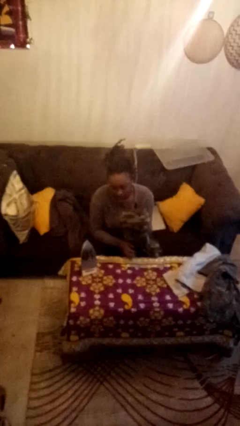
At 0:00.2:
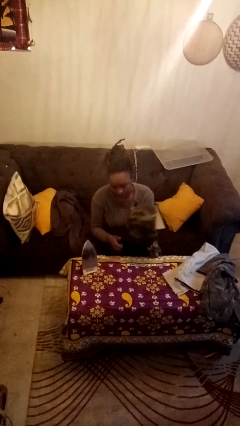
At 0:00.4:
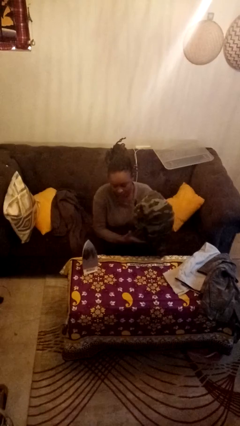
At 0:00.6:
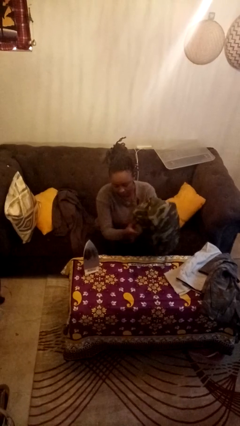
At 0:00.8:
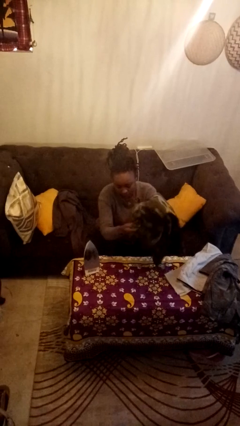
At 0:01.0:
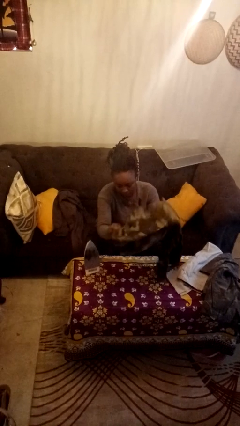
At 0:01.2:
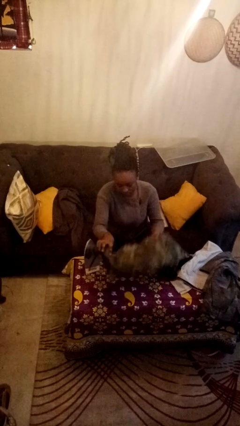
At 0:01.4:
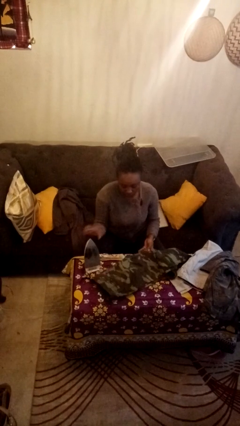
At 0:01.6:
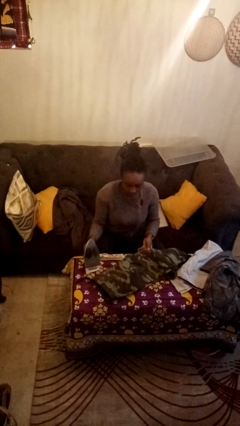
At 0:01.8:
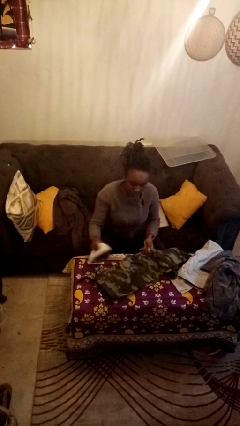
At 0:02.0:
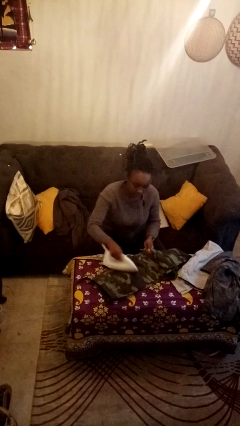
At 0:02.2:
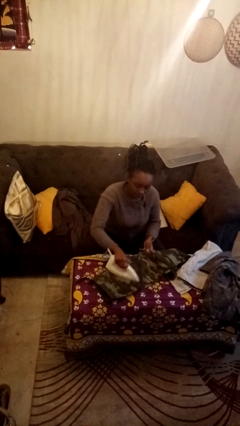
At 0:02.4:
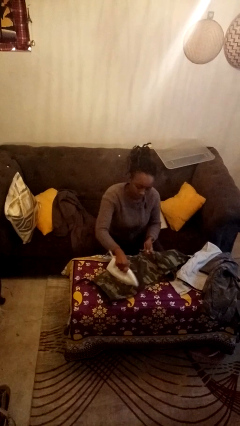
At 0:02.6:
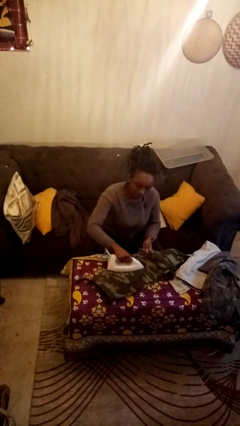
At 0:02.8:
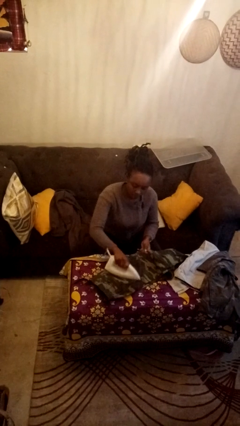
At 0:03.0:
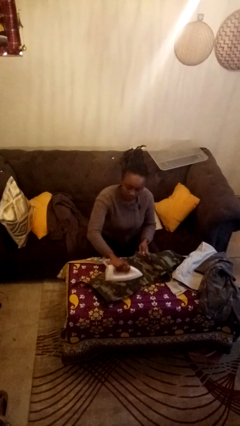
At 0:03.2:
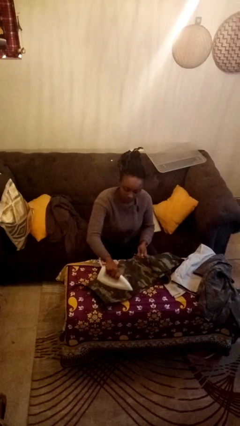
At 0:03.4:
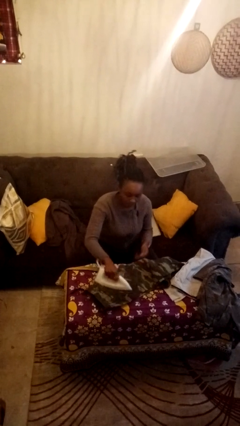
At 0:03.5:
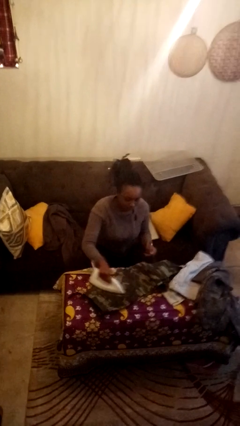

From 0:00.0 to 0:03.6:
person irons clothes

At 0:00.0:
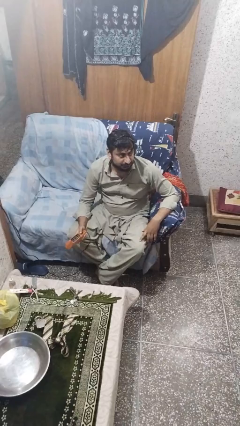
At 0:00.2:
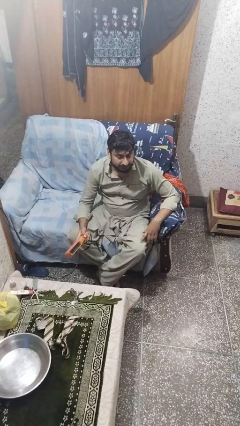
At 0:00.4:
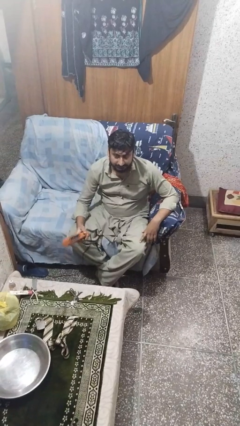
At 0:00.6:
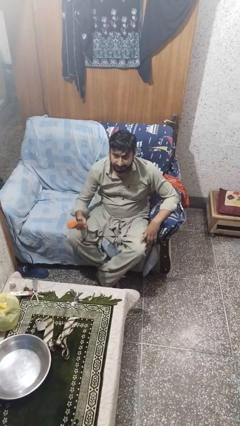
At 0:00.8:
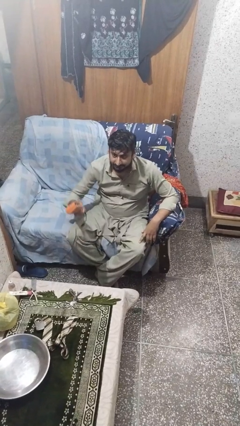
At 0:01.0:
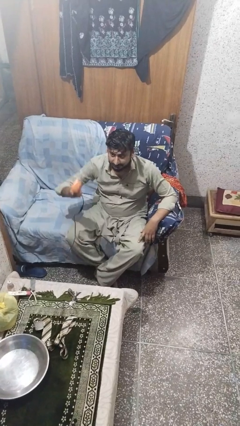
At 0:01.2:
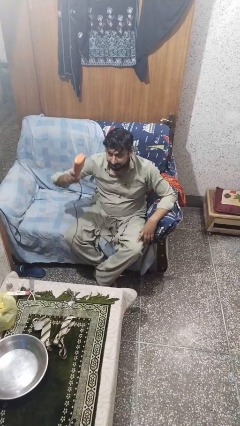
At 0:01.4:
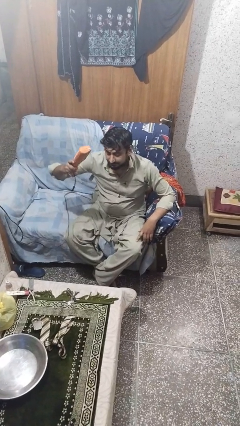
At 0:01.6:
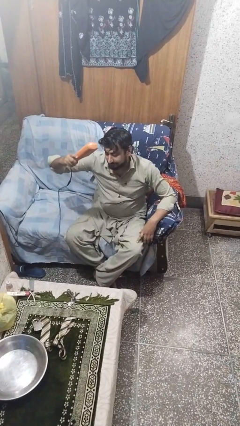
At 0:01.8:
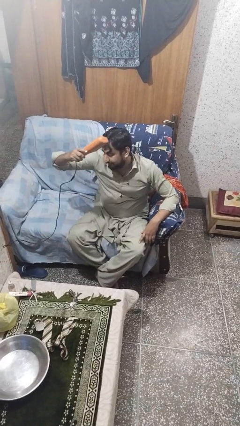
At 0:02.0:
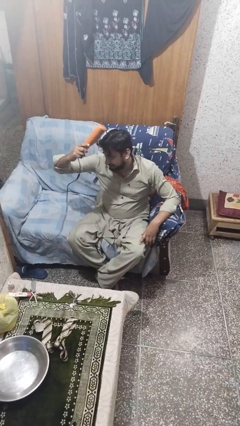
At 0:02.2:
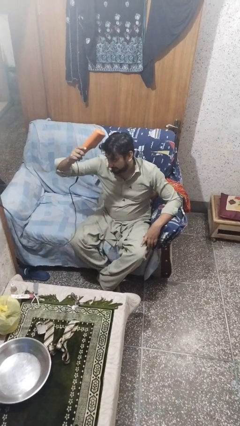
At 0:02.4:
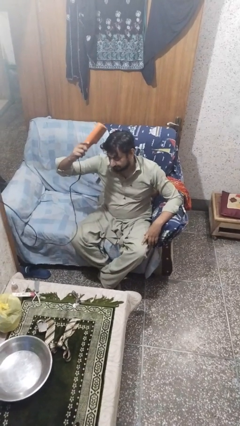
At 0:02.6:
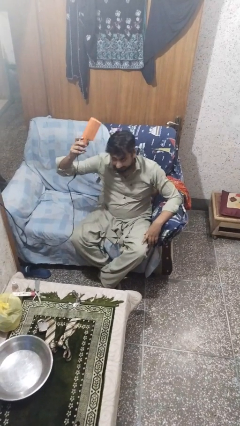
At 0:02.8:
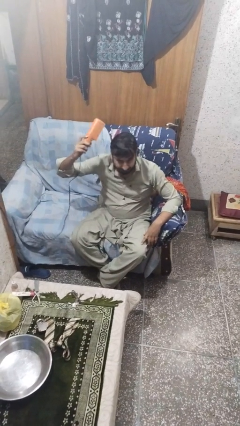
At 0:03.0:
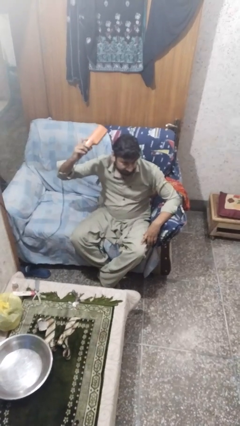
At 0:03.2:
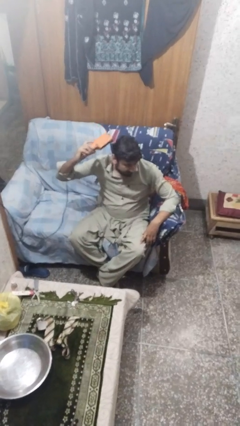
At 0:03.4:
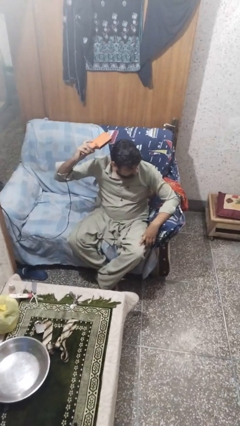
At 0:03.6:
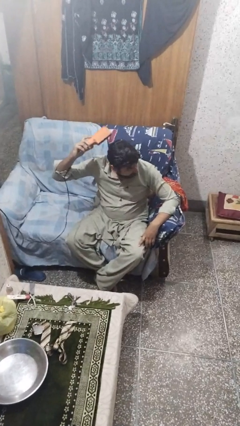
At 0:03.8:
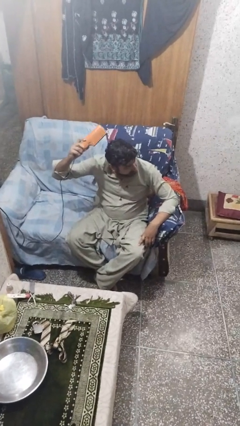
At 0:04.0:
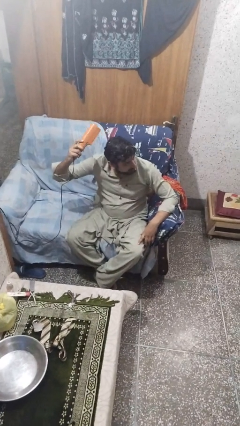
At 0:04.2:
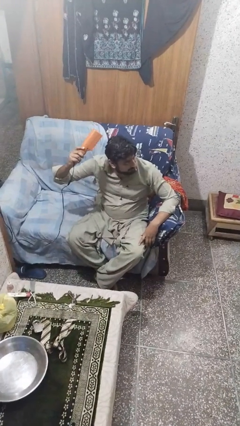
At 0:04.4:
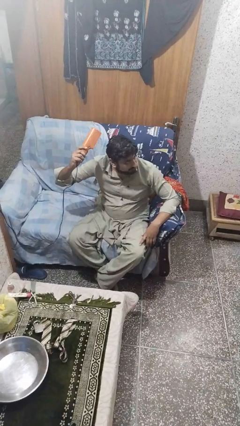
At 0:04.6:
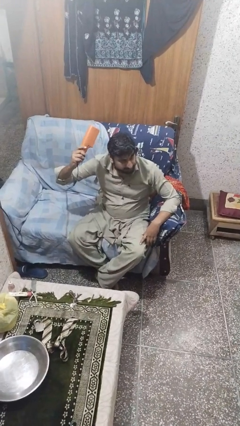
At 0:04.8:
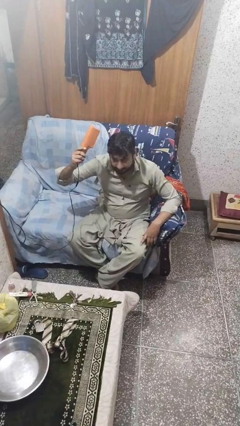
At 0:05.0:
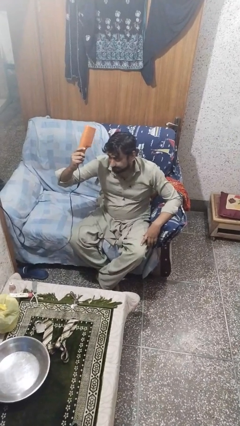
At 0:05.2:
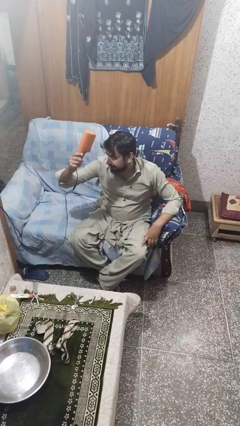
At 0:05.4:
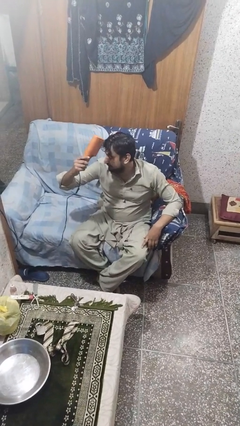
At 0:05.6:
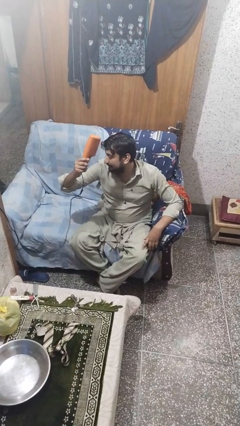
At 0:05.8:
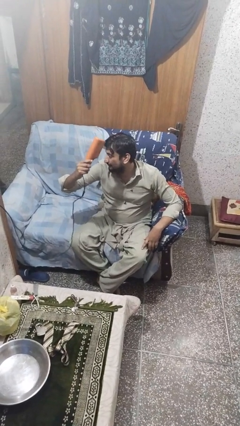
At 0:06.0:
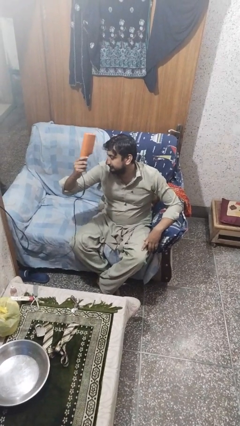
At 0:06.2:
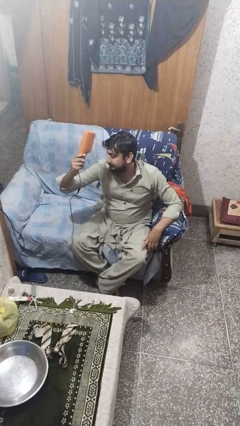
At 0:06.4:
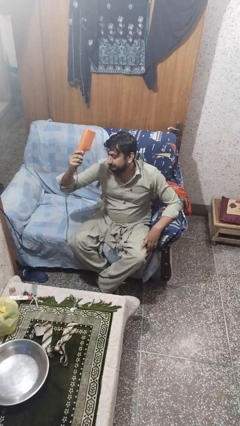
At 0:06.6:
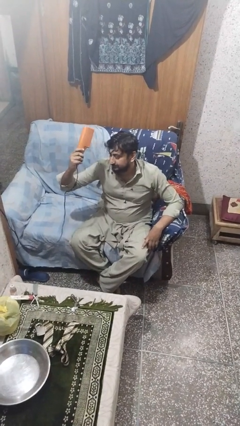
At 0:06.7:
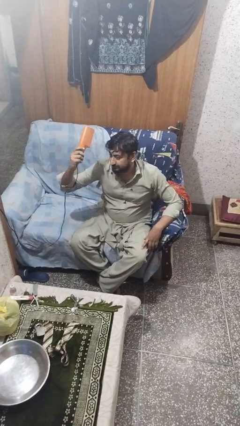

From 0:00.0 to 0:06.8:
person dries hair with hairdryer

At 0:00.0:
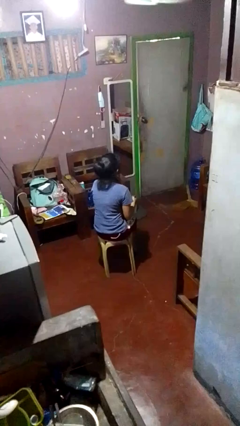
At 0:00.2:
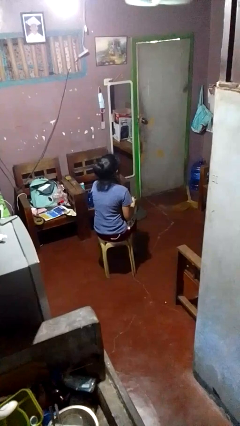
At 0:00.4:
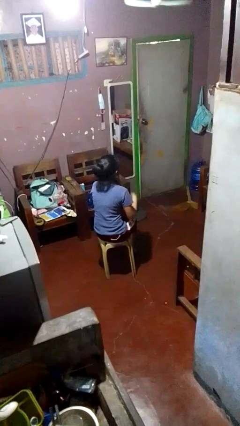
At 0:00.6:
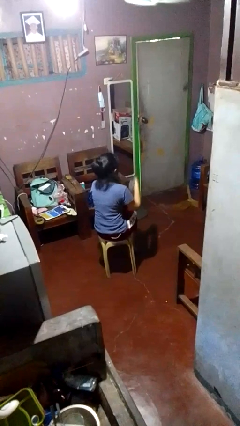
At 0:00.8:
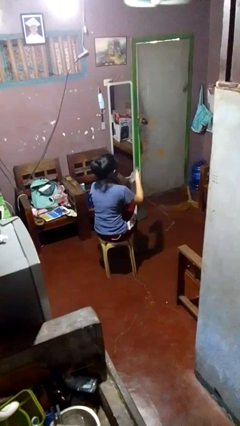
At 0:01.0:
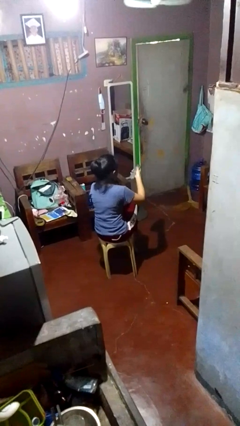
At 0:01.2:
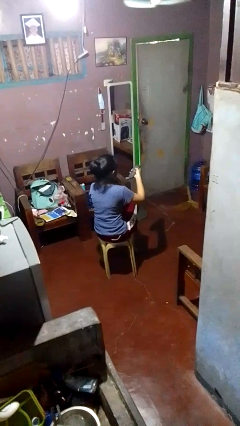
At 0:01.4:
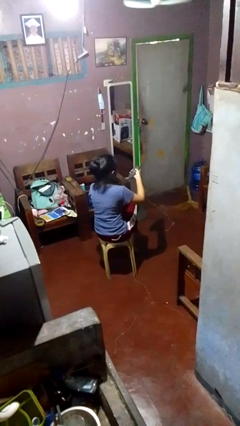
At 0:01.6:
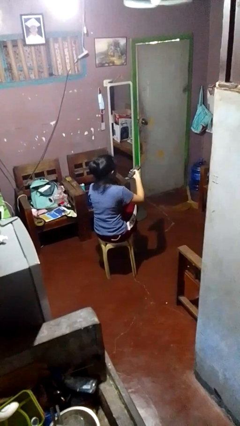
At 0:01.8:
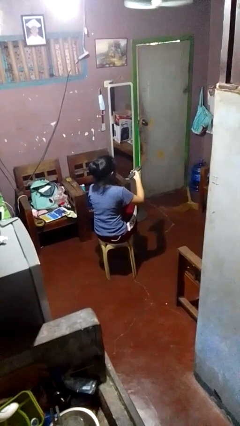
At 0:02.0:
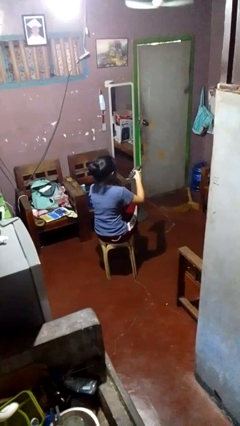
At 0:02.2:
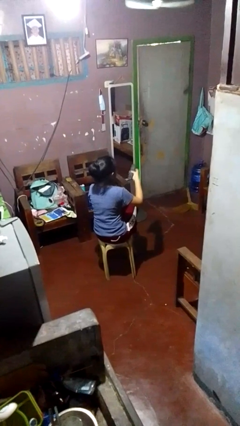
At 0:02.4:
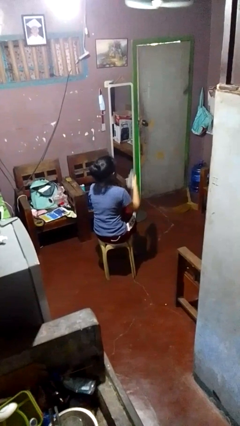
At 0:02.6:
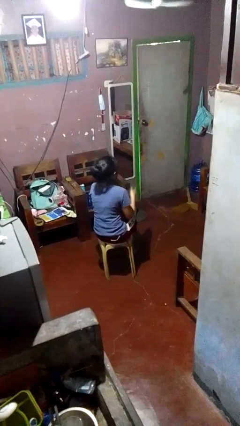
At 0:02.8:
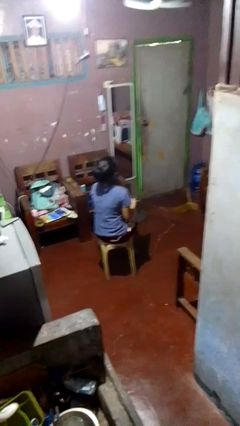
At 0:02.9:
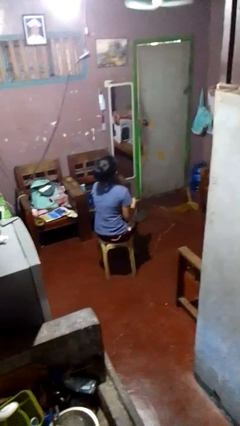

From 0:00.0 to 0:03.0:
person uses television remote

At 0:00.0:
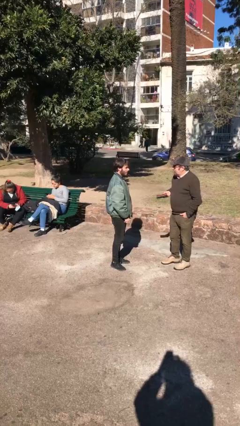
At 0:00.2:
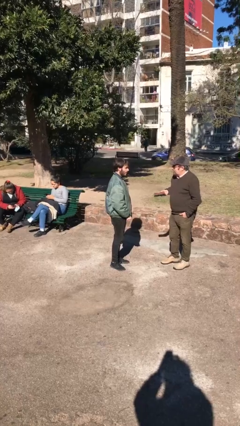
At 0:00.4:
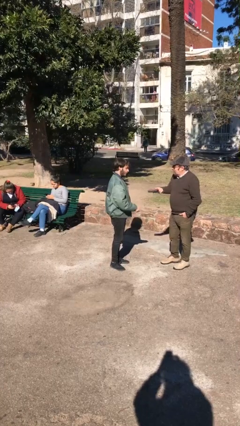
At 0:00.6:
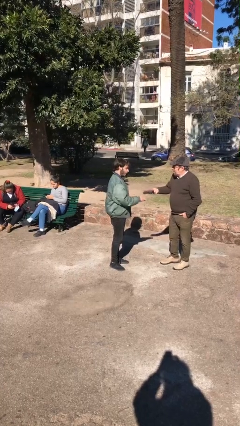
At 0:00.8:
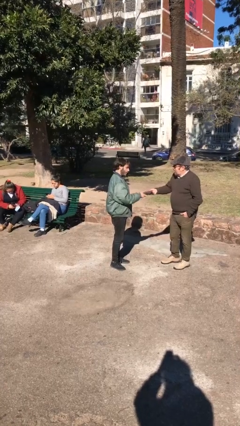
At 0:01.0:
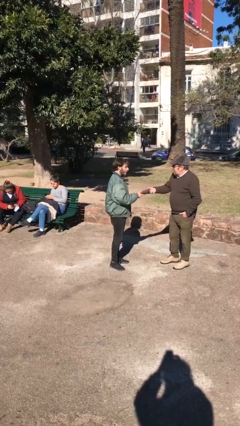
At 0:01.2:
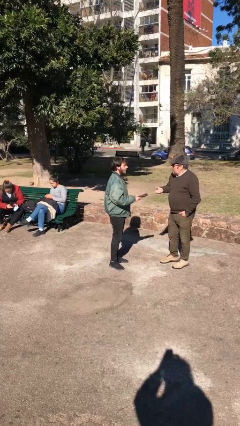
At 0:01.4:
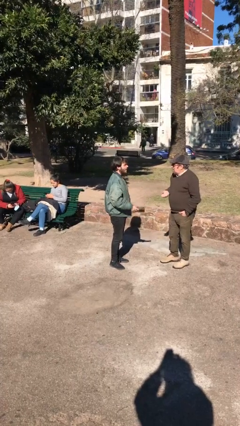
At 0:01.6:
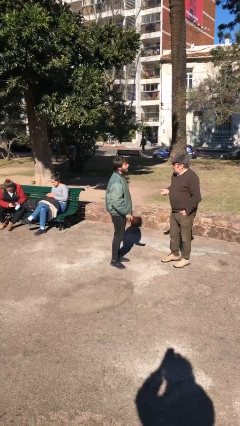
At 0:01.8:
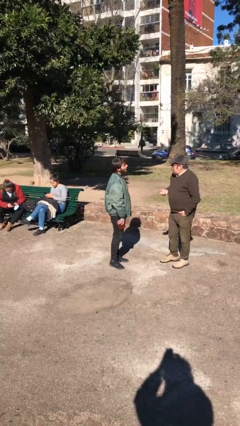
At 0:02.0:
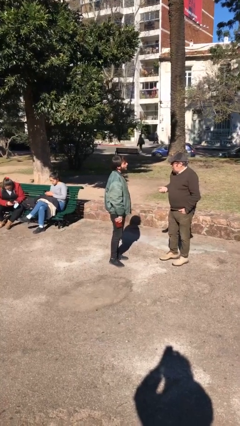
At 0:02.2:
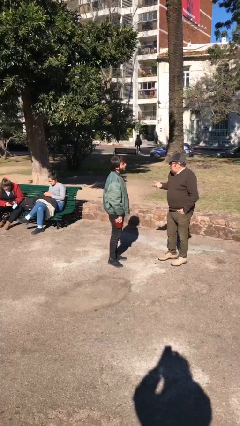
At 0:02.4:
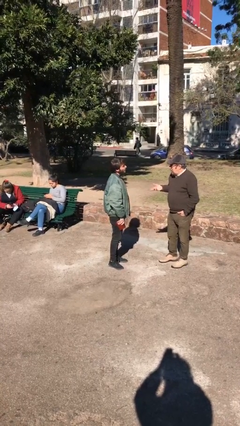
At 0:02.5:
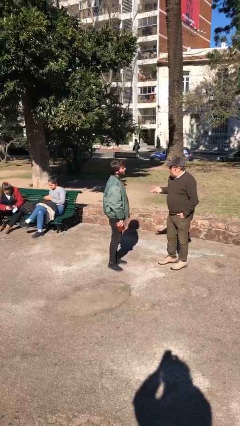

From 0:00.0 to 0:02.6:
person transfers object to person

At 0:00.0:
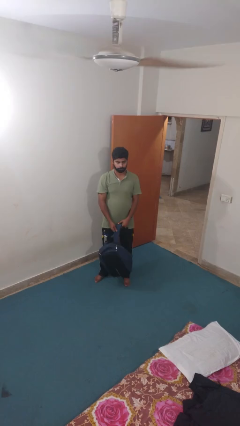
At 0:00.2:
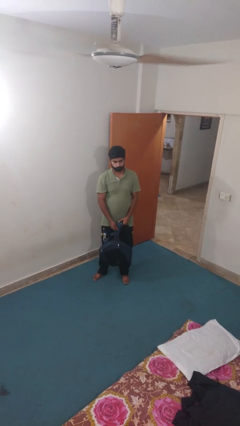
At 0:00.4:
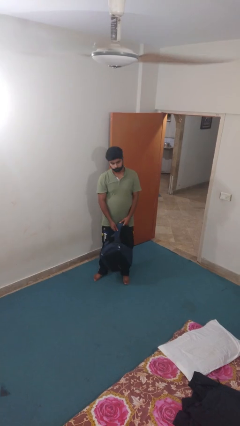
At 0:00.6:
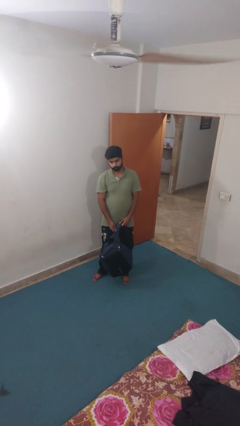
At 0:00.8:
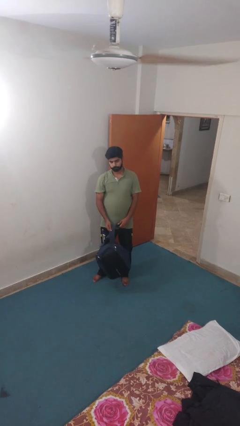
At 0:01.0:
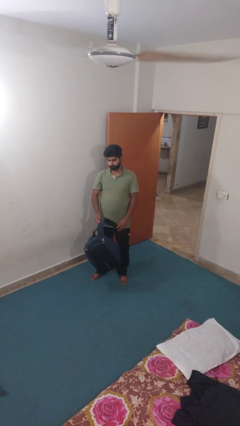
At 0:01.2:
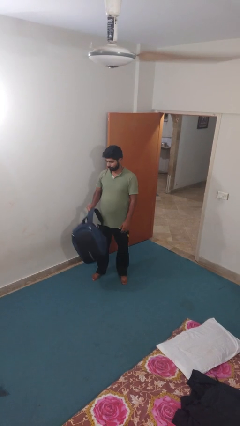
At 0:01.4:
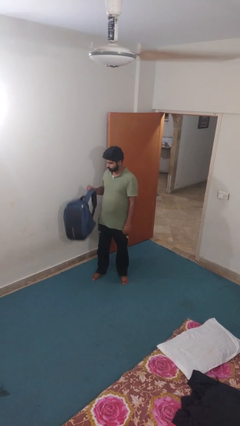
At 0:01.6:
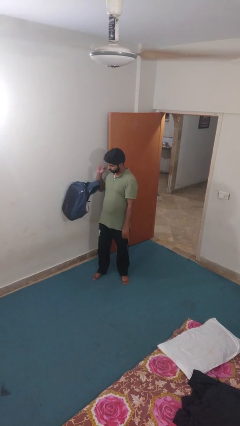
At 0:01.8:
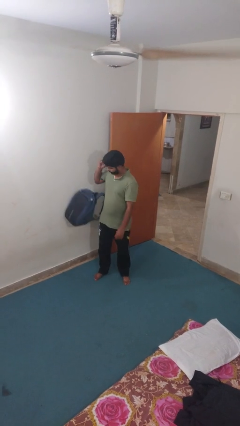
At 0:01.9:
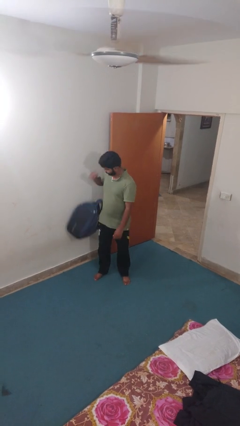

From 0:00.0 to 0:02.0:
person drops object
